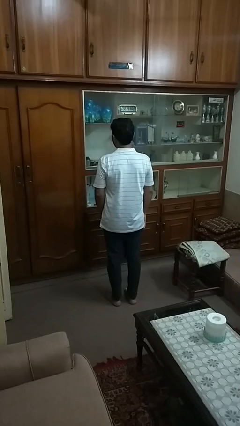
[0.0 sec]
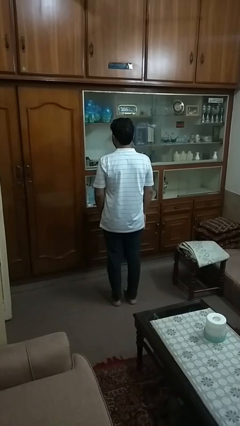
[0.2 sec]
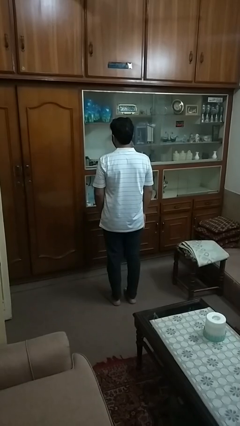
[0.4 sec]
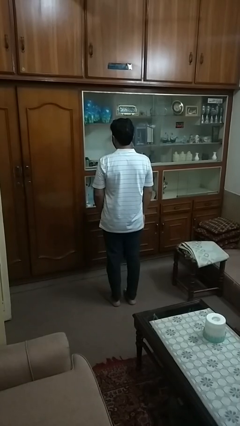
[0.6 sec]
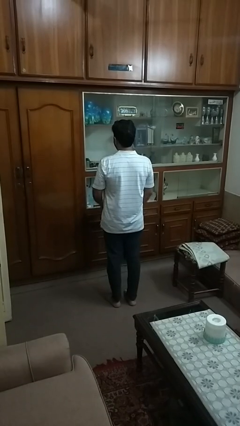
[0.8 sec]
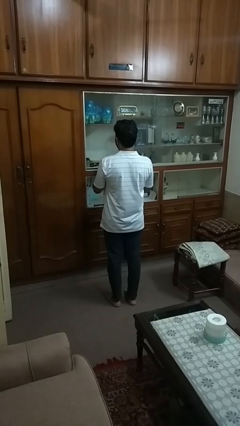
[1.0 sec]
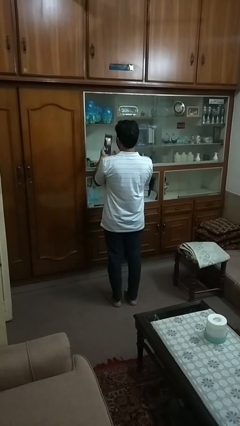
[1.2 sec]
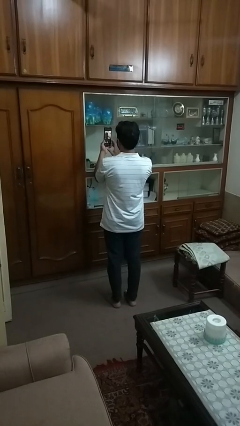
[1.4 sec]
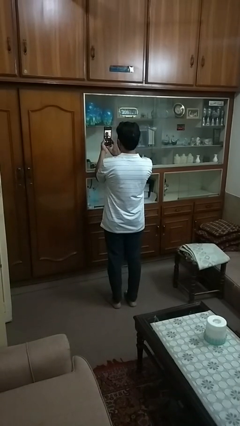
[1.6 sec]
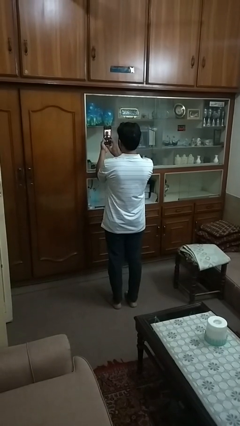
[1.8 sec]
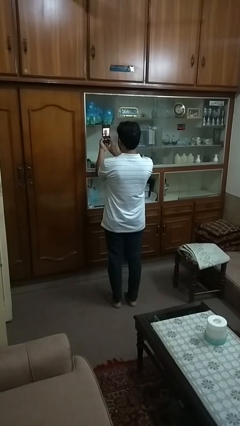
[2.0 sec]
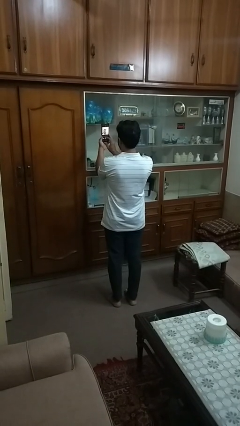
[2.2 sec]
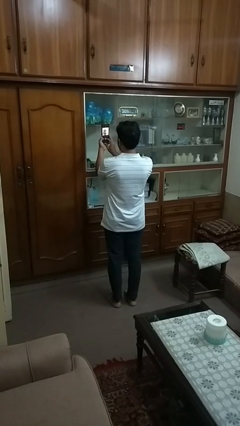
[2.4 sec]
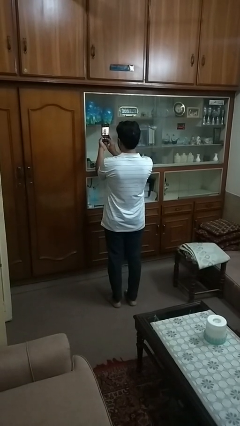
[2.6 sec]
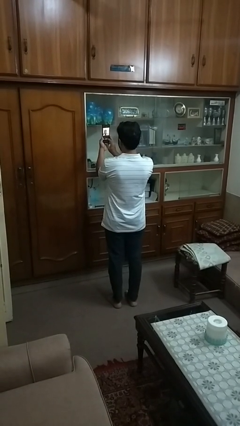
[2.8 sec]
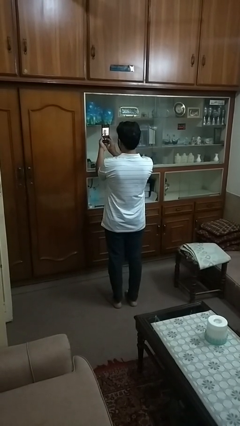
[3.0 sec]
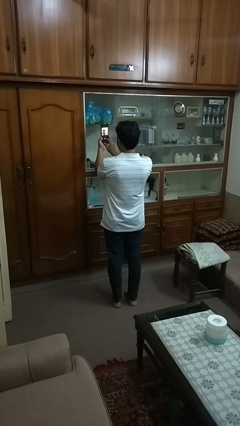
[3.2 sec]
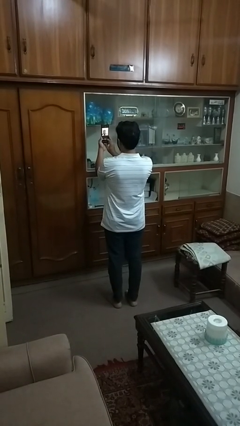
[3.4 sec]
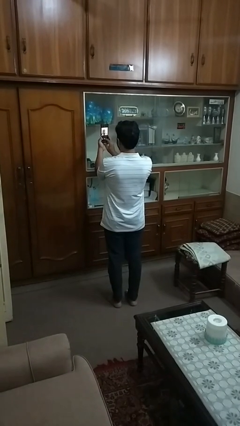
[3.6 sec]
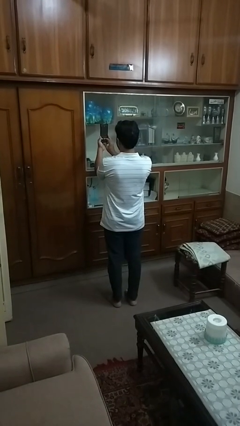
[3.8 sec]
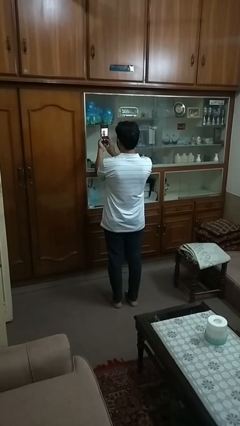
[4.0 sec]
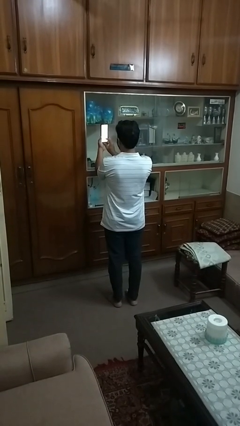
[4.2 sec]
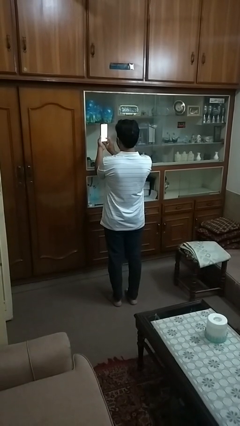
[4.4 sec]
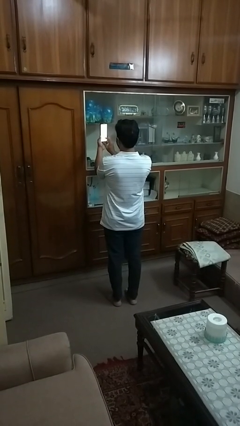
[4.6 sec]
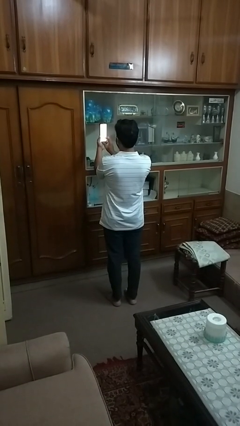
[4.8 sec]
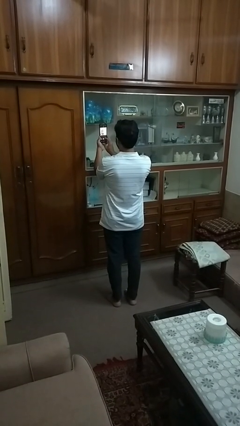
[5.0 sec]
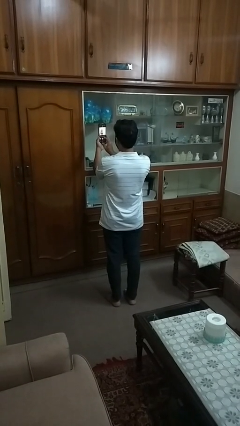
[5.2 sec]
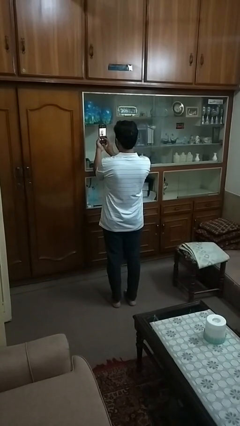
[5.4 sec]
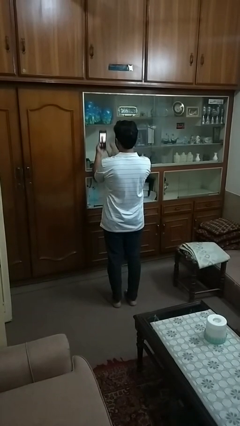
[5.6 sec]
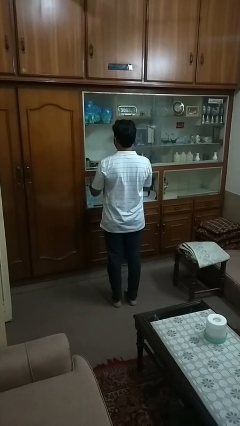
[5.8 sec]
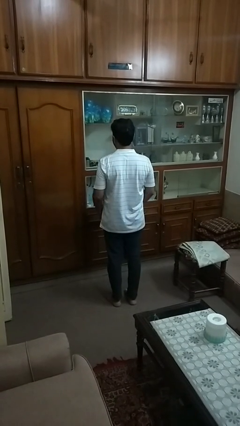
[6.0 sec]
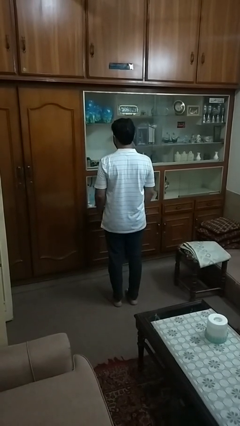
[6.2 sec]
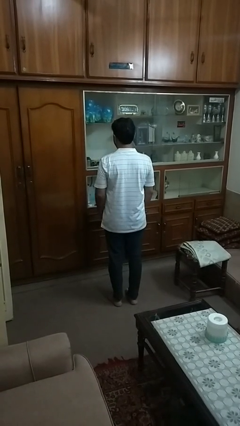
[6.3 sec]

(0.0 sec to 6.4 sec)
person takes selfie

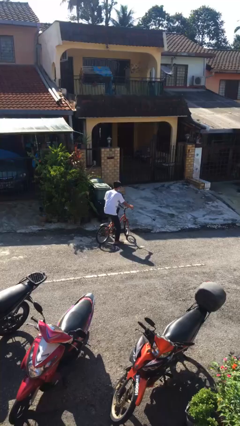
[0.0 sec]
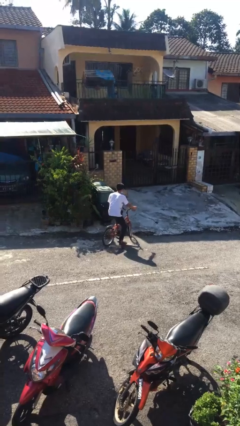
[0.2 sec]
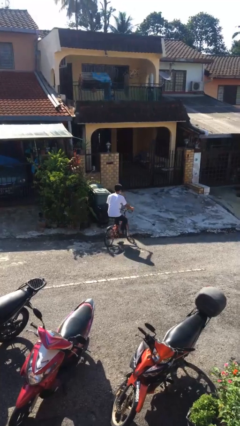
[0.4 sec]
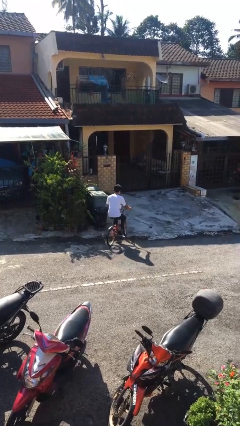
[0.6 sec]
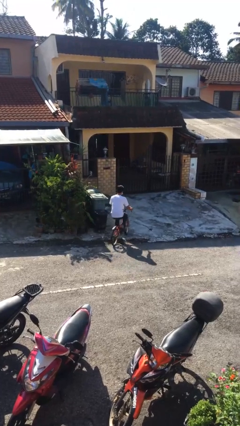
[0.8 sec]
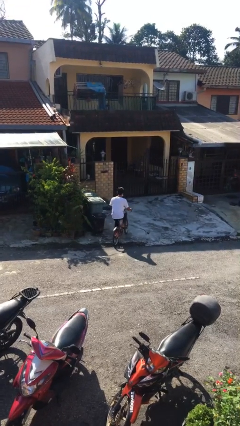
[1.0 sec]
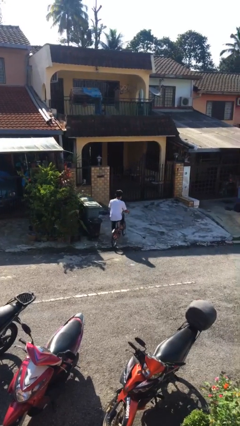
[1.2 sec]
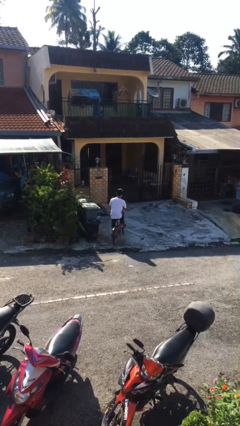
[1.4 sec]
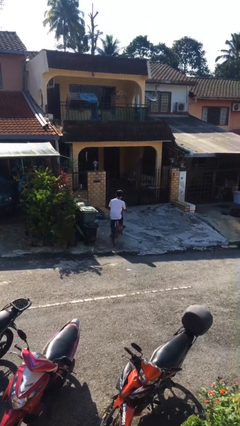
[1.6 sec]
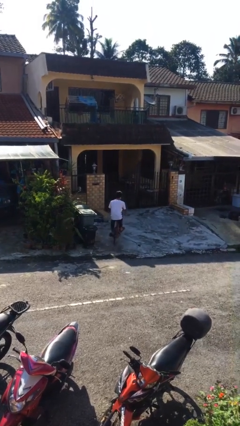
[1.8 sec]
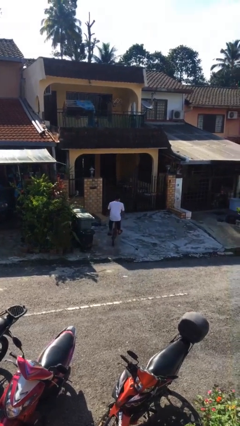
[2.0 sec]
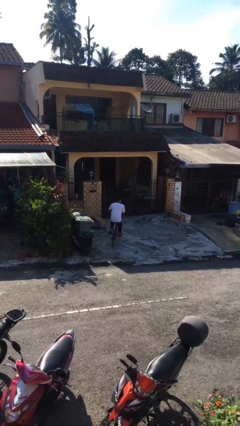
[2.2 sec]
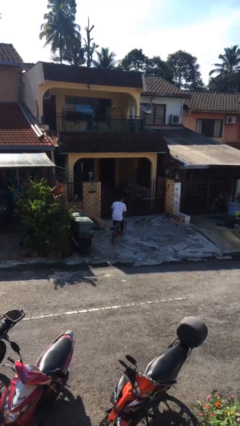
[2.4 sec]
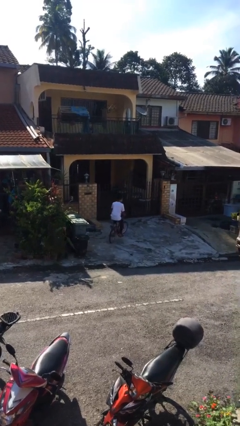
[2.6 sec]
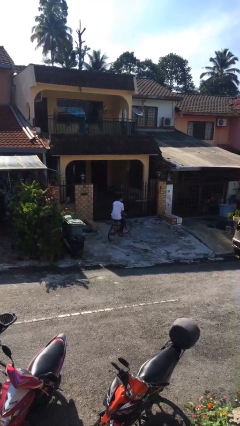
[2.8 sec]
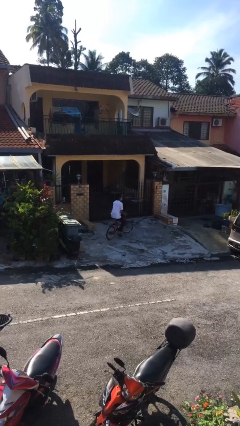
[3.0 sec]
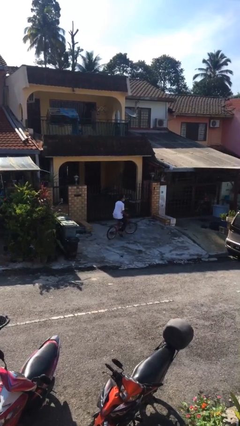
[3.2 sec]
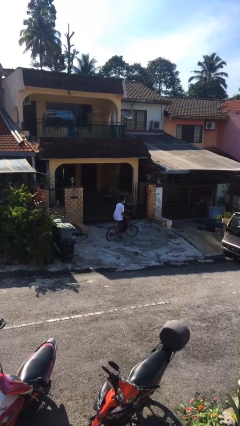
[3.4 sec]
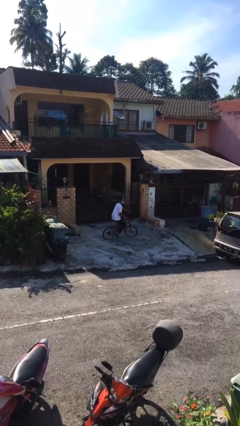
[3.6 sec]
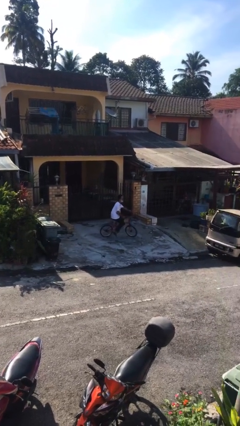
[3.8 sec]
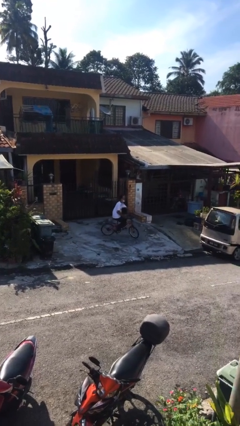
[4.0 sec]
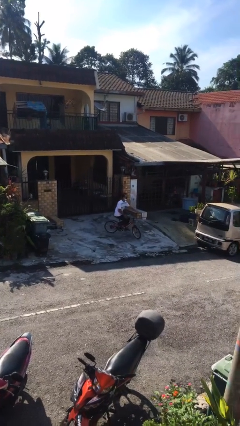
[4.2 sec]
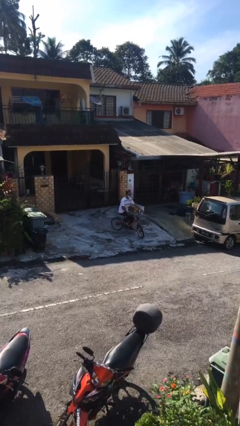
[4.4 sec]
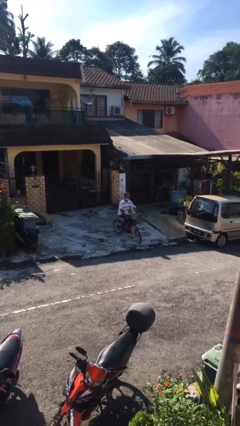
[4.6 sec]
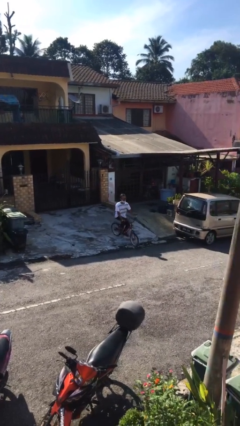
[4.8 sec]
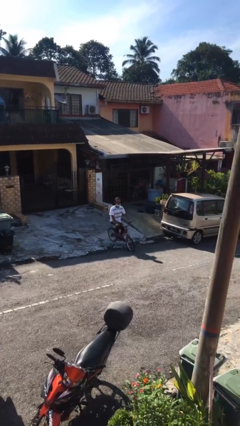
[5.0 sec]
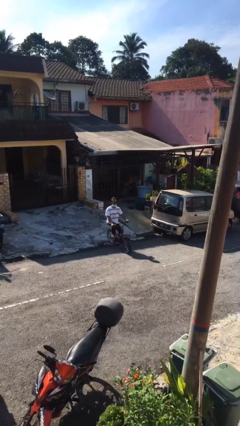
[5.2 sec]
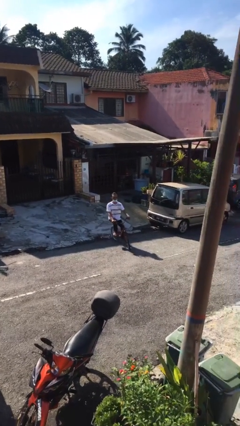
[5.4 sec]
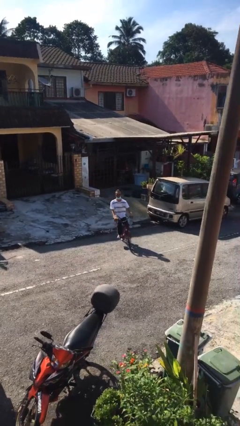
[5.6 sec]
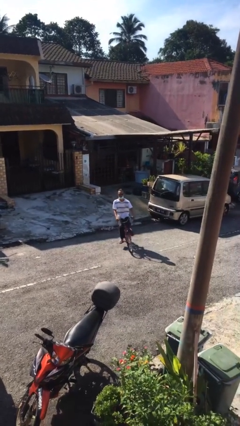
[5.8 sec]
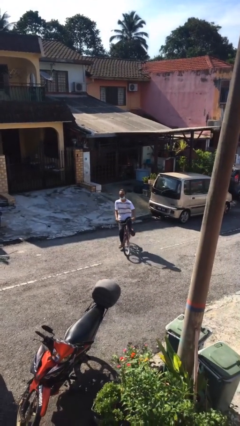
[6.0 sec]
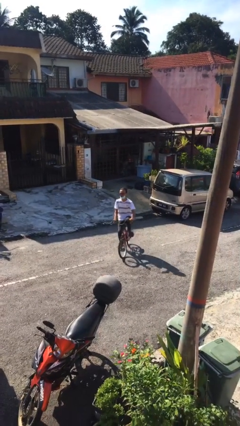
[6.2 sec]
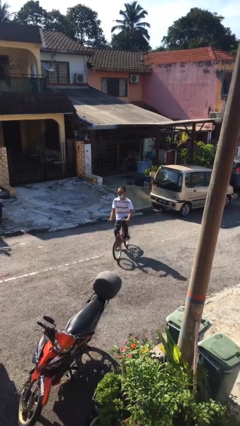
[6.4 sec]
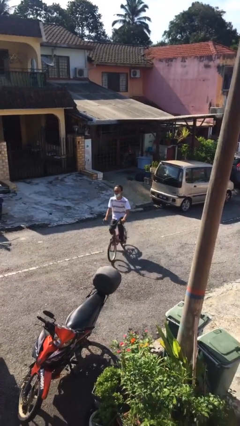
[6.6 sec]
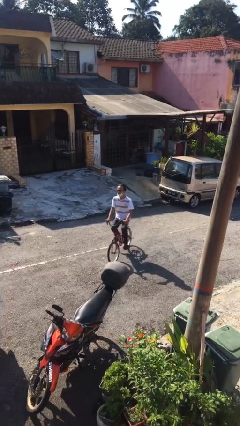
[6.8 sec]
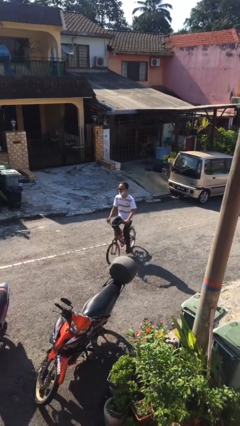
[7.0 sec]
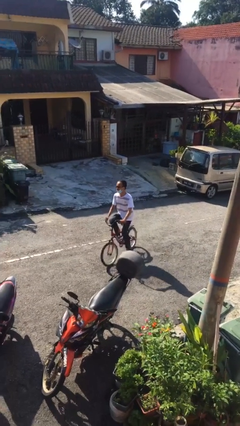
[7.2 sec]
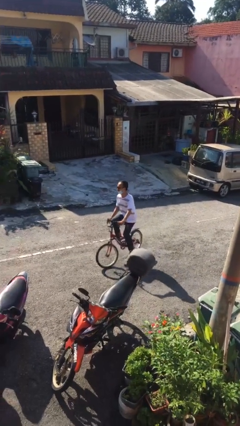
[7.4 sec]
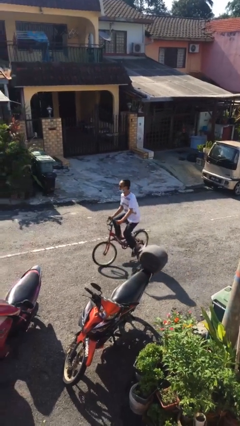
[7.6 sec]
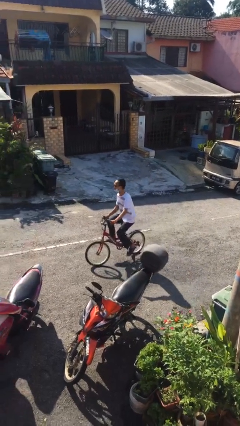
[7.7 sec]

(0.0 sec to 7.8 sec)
person rides bicycle

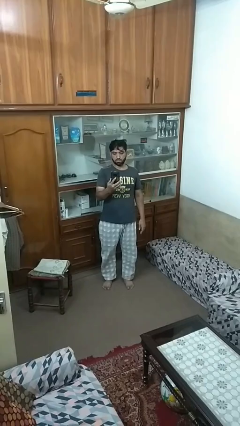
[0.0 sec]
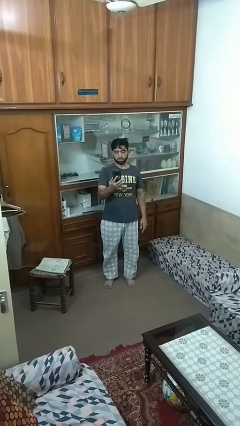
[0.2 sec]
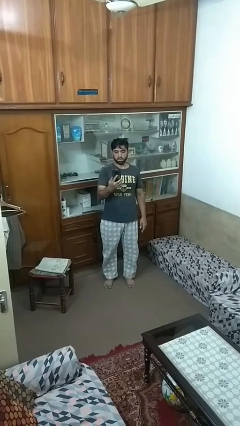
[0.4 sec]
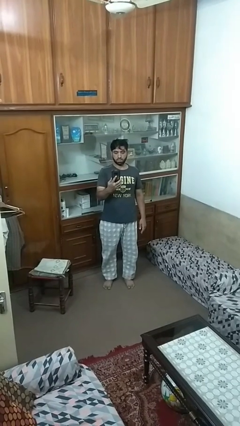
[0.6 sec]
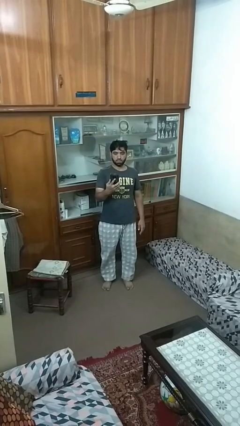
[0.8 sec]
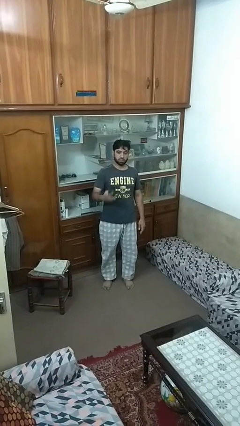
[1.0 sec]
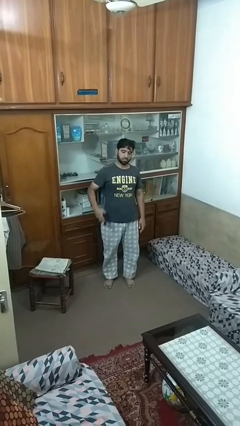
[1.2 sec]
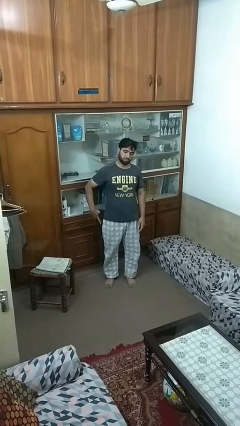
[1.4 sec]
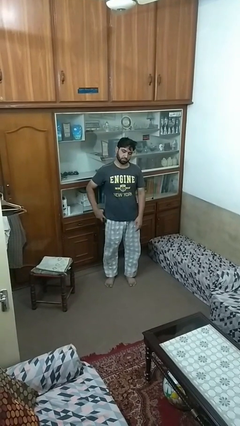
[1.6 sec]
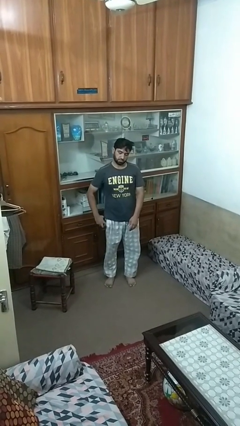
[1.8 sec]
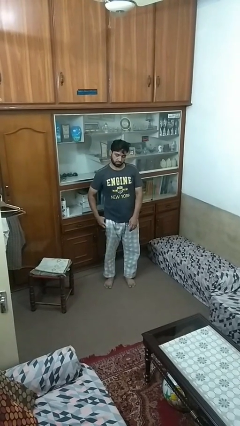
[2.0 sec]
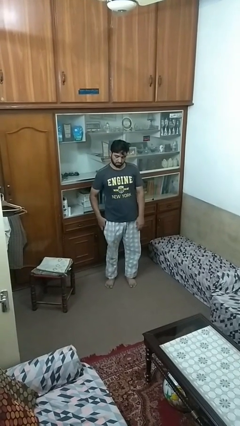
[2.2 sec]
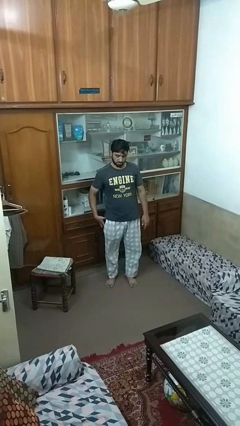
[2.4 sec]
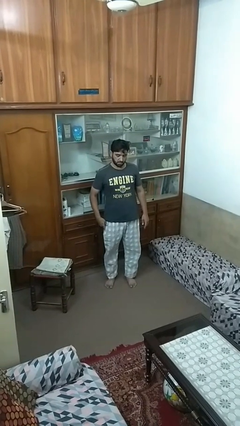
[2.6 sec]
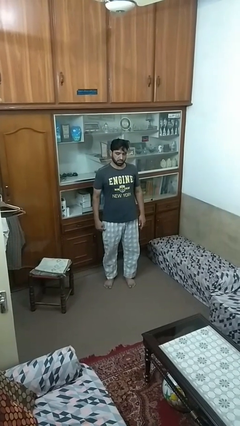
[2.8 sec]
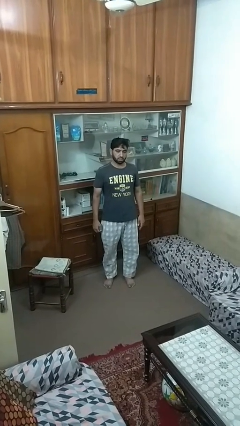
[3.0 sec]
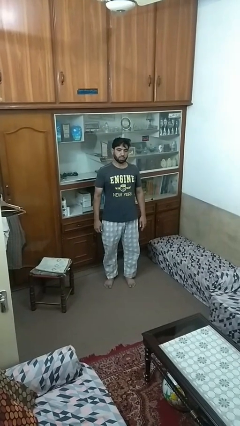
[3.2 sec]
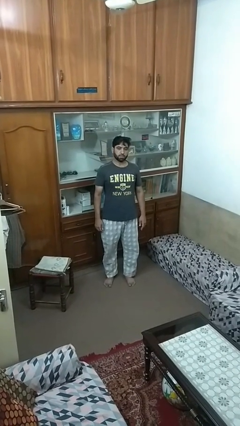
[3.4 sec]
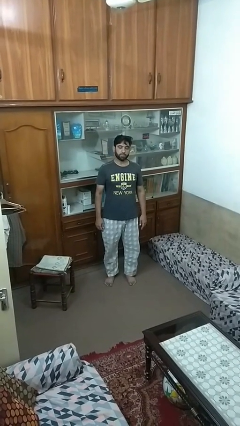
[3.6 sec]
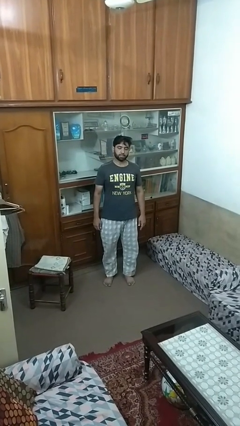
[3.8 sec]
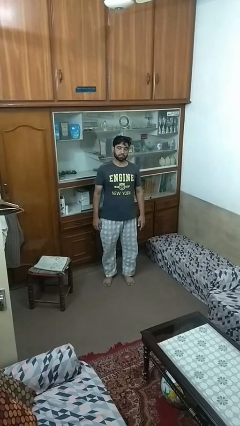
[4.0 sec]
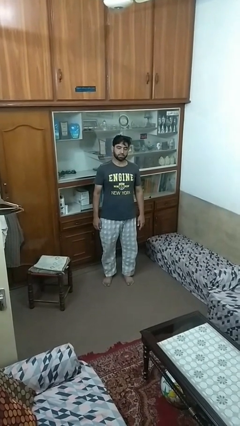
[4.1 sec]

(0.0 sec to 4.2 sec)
person puts phone into pocket
